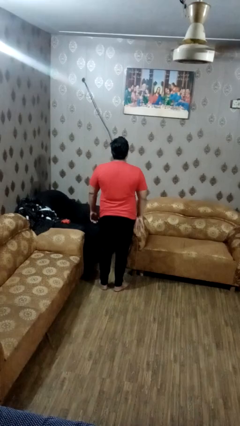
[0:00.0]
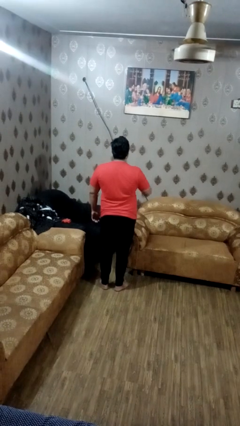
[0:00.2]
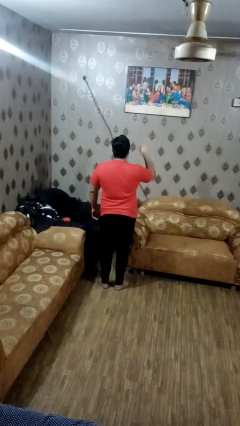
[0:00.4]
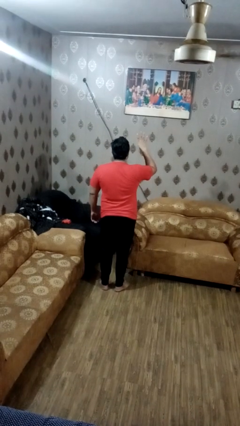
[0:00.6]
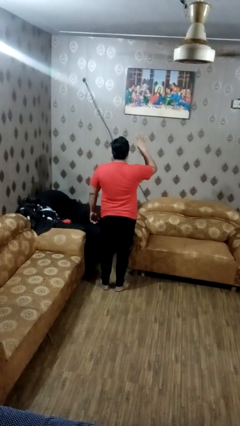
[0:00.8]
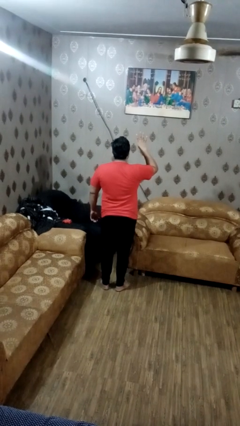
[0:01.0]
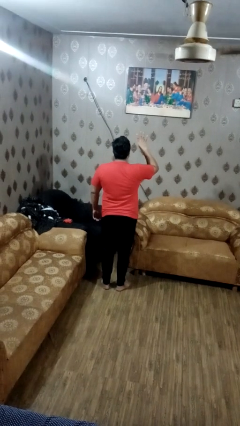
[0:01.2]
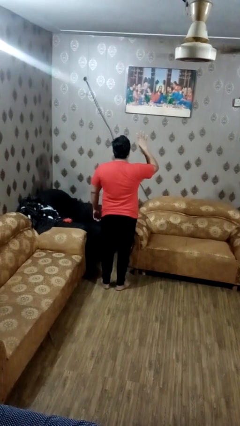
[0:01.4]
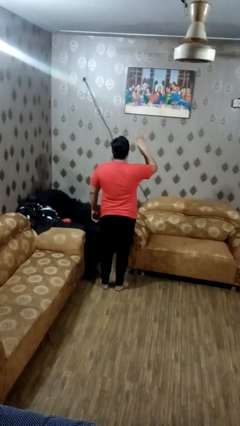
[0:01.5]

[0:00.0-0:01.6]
person gestures number four

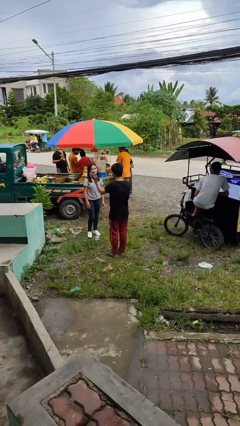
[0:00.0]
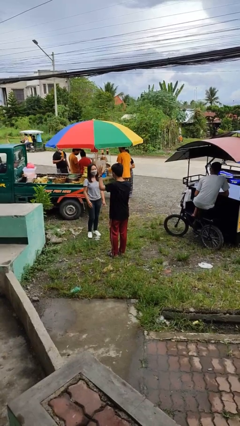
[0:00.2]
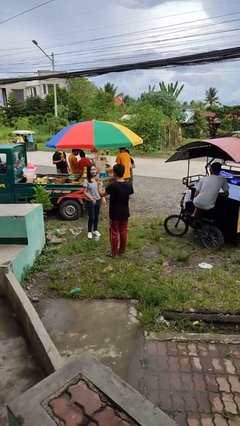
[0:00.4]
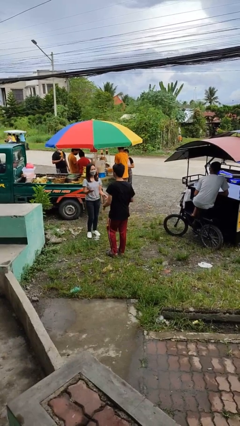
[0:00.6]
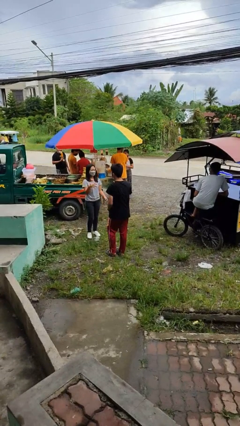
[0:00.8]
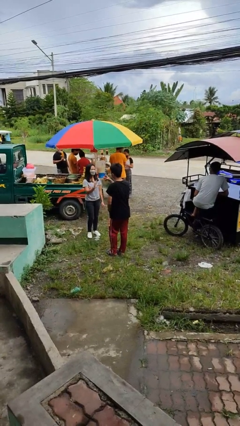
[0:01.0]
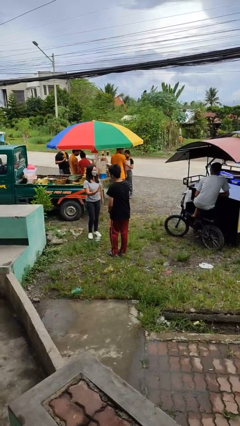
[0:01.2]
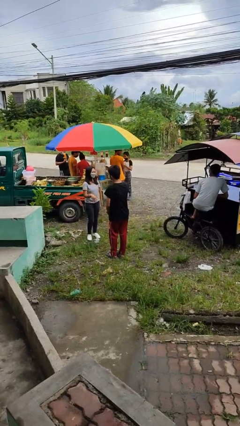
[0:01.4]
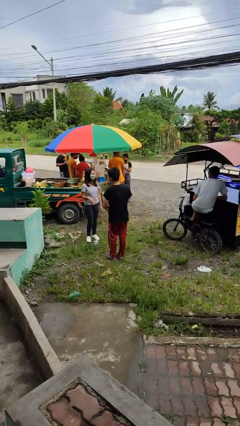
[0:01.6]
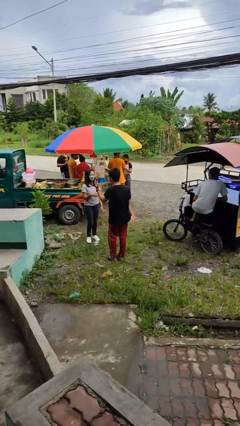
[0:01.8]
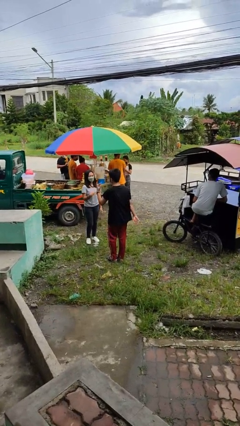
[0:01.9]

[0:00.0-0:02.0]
person talks to person

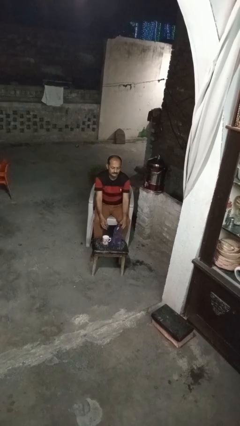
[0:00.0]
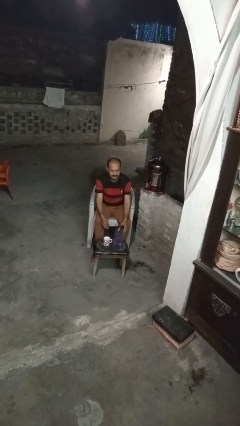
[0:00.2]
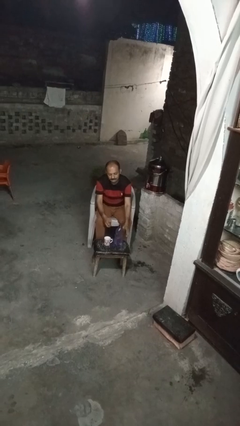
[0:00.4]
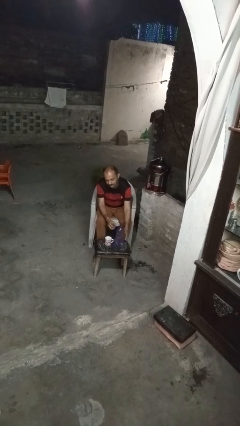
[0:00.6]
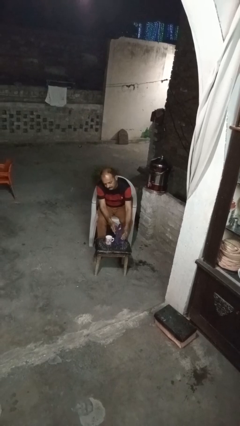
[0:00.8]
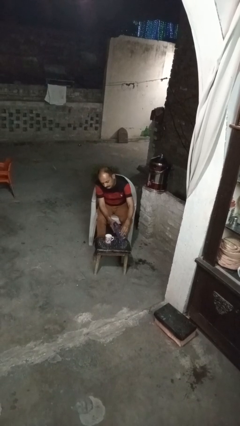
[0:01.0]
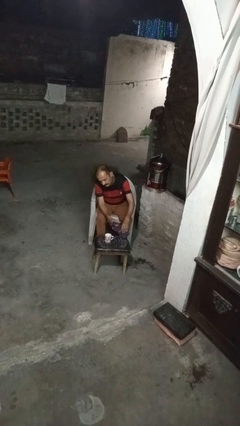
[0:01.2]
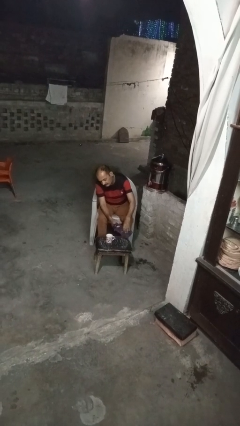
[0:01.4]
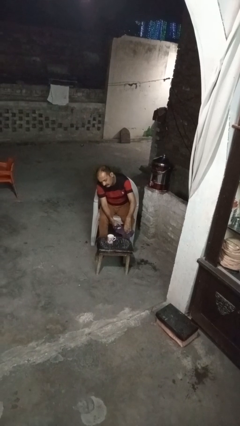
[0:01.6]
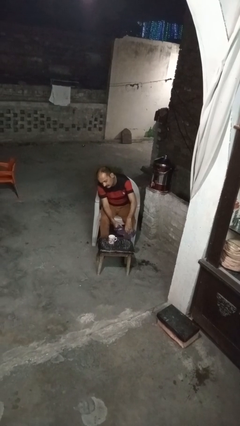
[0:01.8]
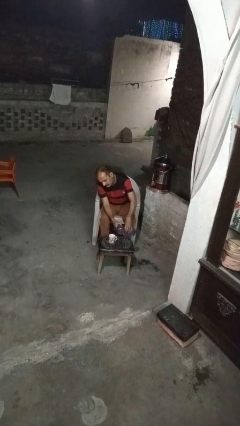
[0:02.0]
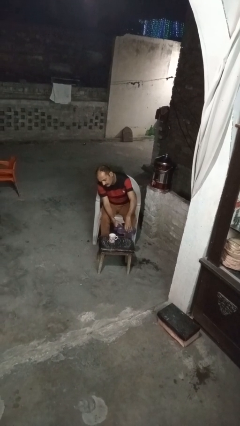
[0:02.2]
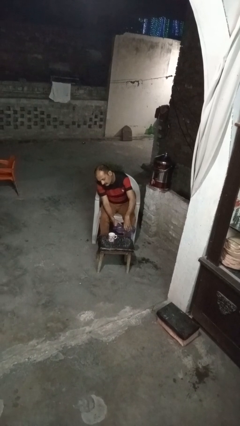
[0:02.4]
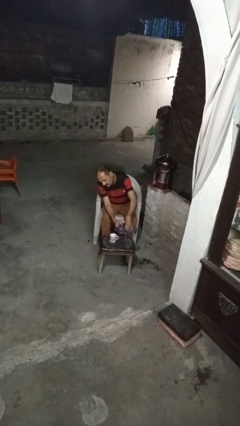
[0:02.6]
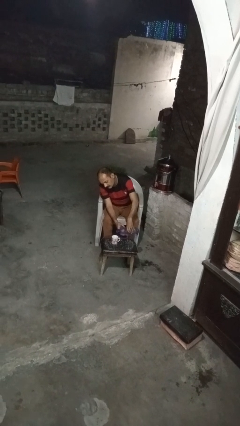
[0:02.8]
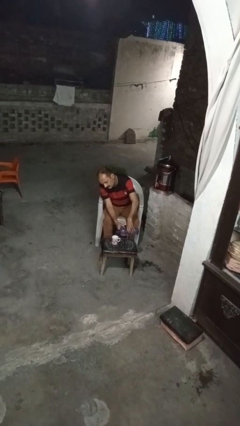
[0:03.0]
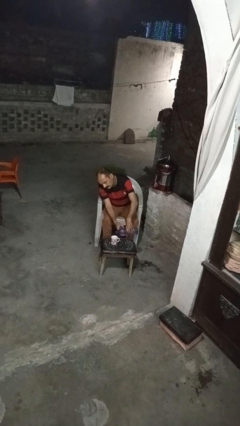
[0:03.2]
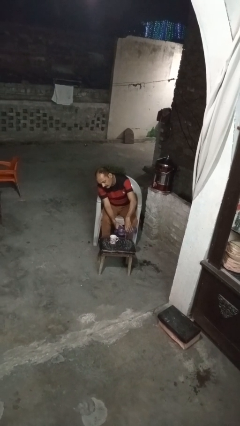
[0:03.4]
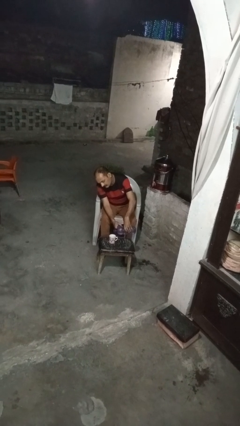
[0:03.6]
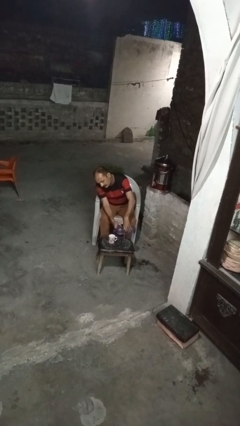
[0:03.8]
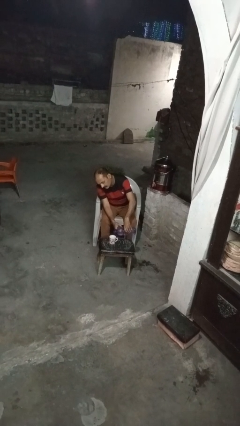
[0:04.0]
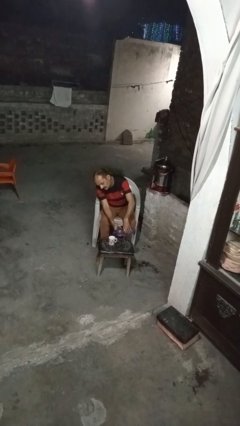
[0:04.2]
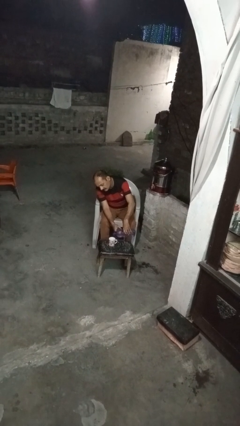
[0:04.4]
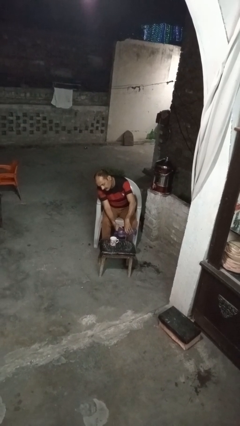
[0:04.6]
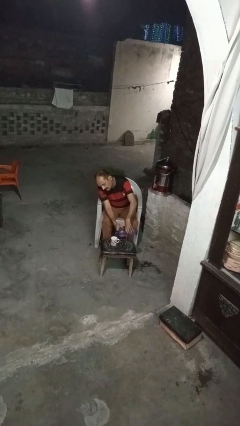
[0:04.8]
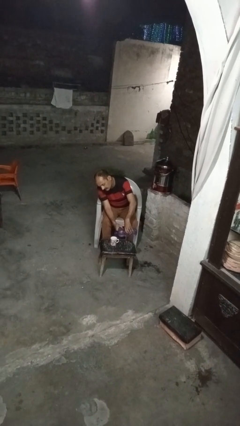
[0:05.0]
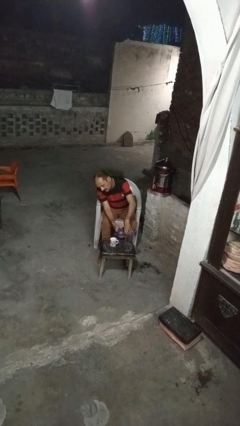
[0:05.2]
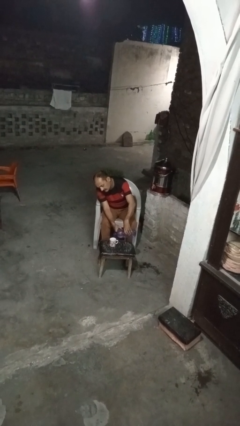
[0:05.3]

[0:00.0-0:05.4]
person pours liquid into cup

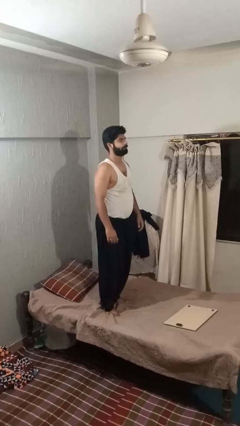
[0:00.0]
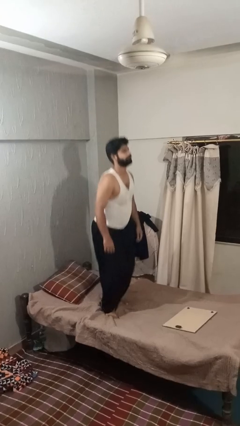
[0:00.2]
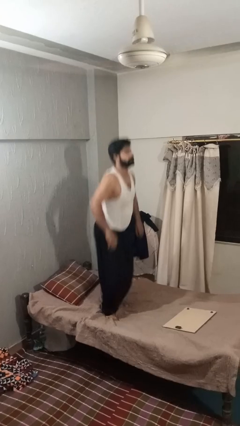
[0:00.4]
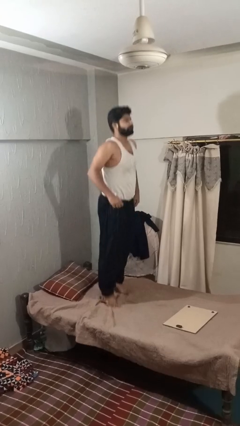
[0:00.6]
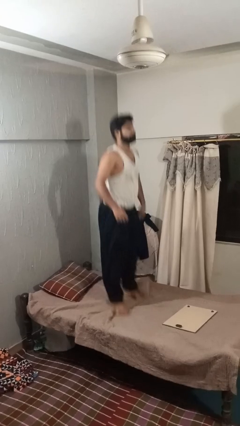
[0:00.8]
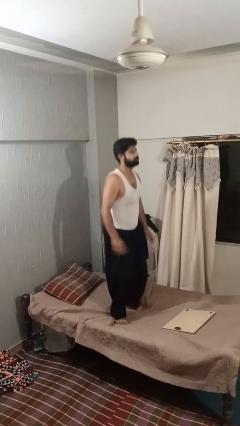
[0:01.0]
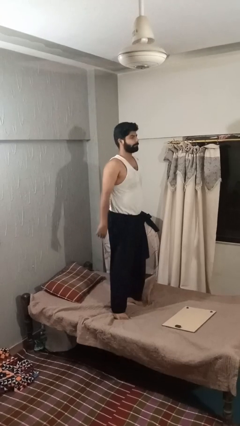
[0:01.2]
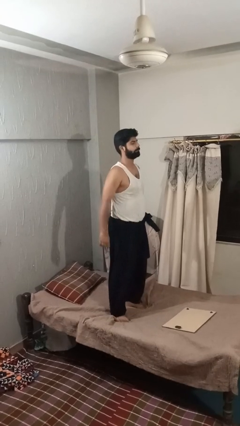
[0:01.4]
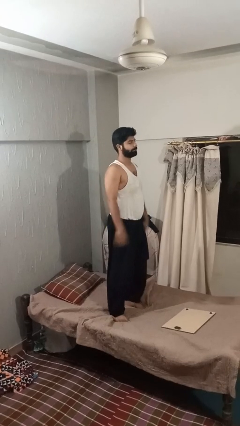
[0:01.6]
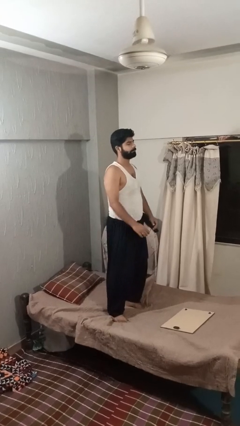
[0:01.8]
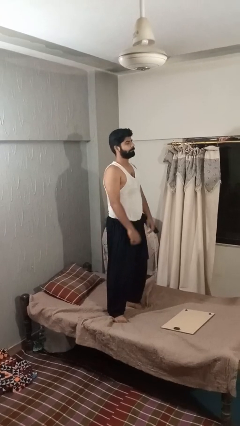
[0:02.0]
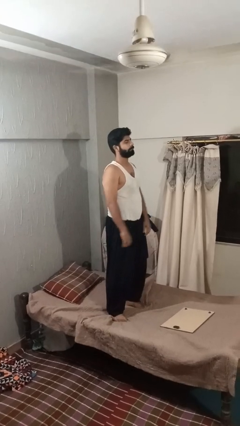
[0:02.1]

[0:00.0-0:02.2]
person jumps on bed

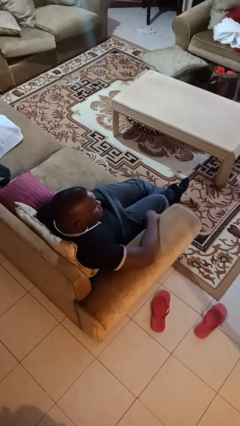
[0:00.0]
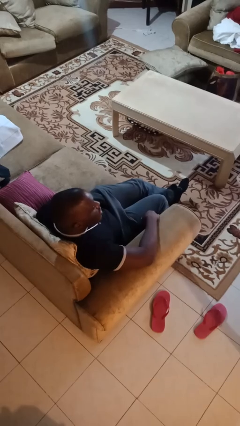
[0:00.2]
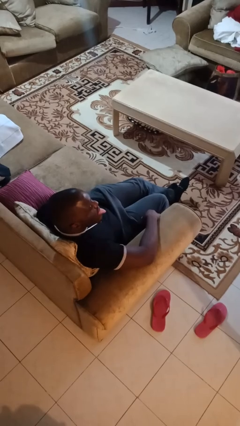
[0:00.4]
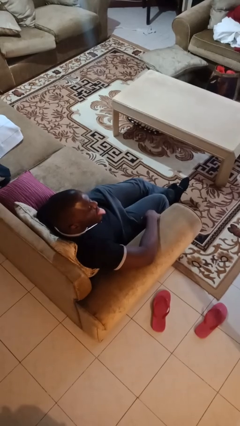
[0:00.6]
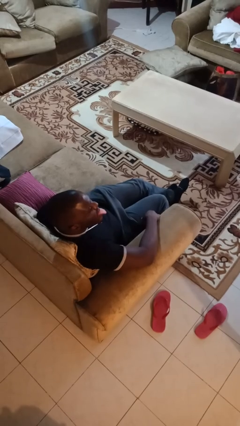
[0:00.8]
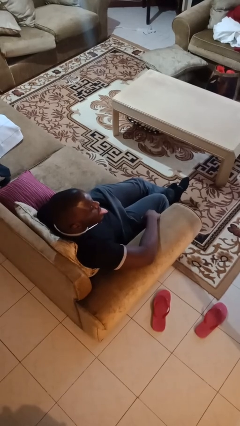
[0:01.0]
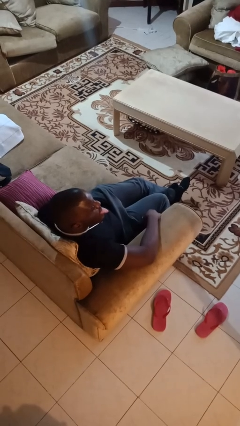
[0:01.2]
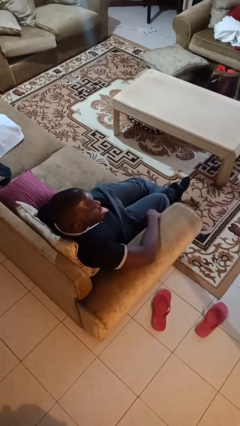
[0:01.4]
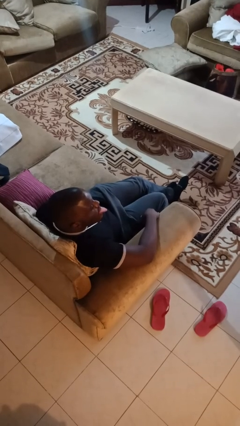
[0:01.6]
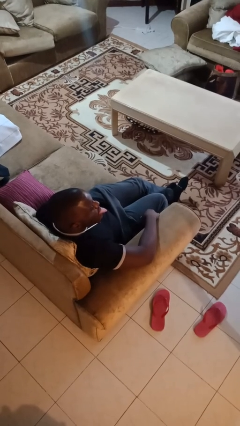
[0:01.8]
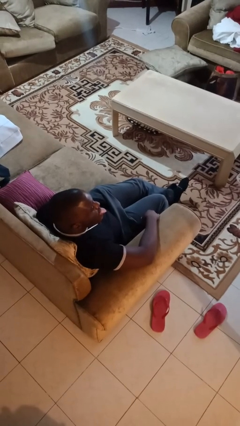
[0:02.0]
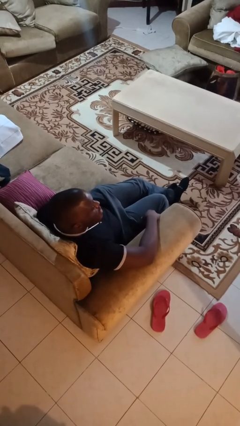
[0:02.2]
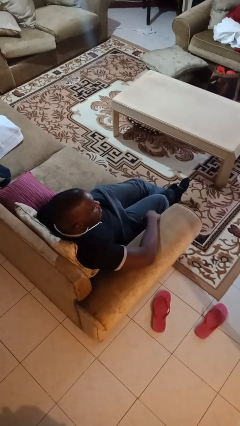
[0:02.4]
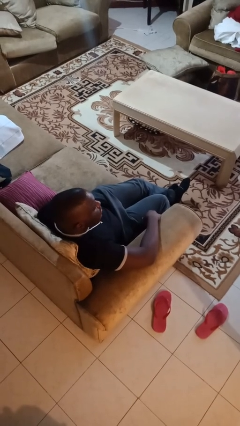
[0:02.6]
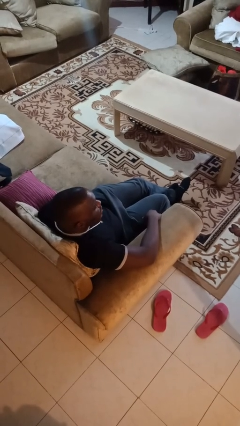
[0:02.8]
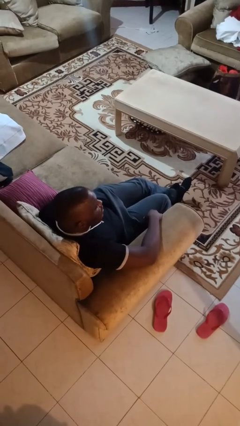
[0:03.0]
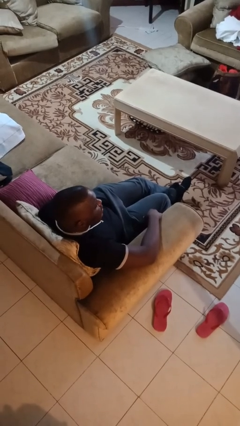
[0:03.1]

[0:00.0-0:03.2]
person sticks out tongue

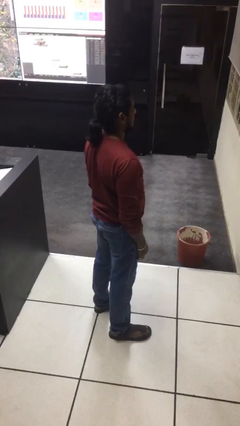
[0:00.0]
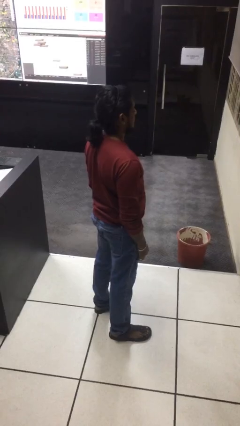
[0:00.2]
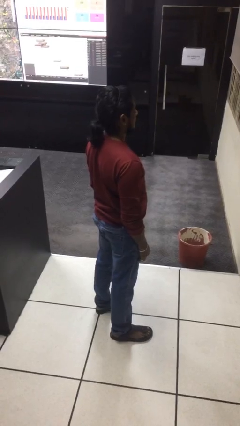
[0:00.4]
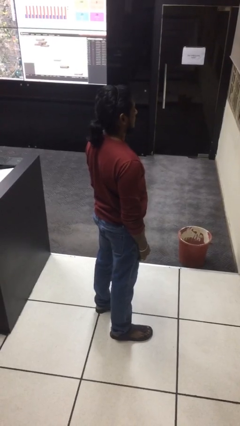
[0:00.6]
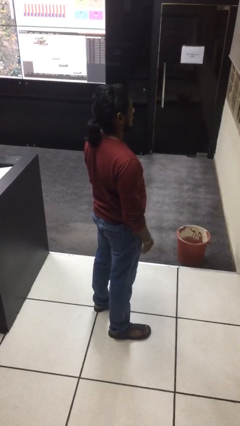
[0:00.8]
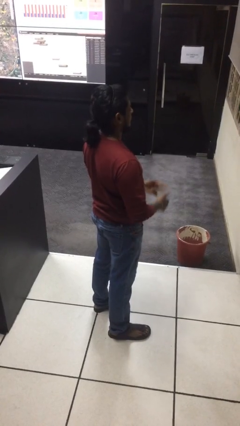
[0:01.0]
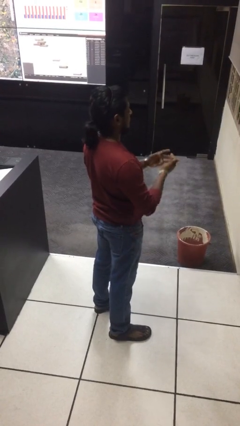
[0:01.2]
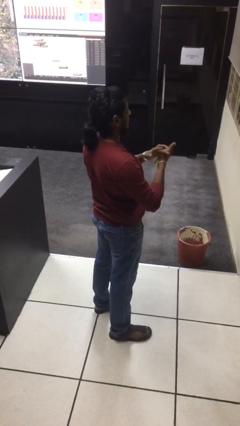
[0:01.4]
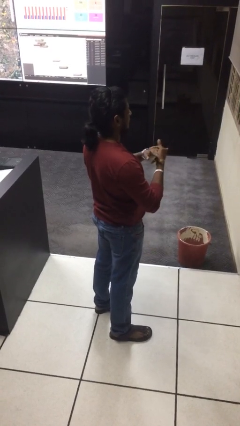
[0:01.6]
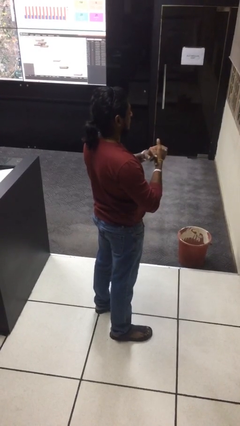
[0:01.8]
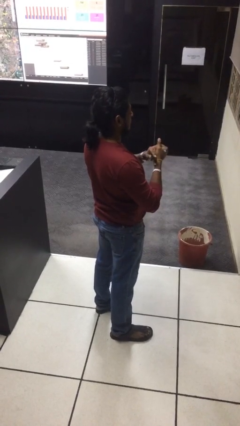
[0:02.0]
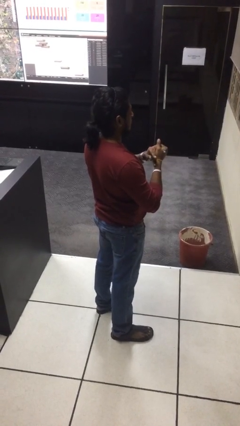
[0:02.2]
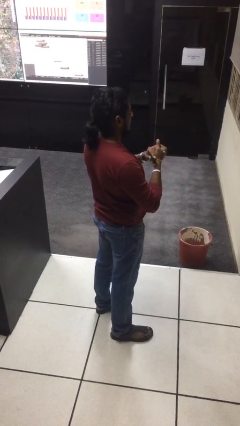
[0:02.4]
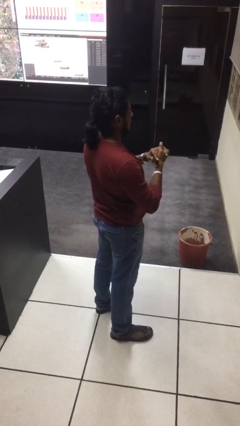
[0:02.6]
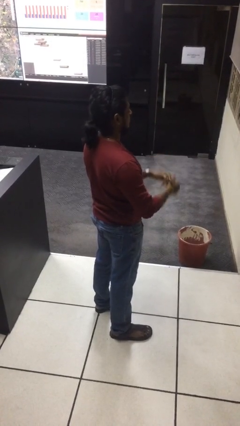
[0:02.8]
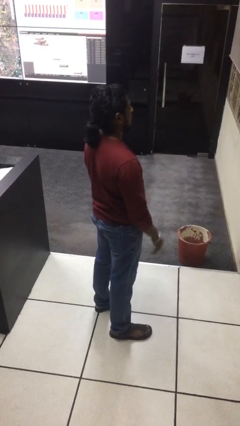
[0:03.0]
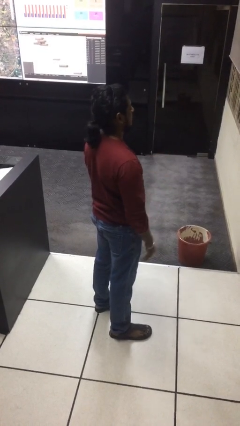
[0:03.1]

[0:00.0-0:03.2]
person cracks knuckles
